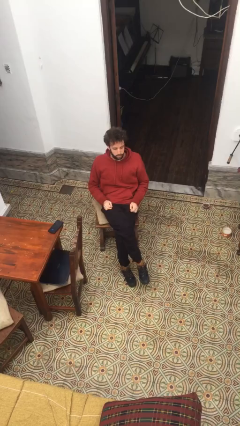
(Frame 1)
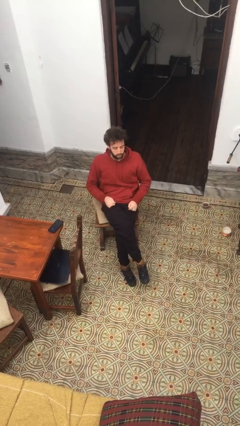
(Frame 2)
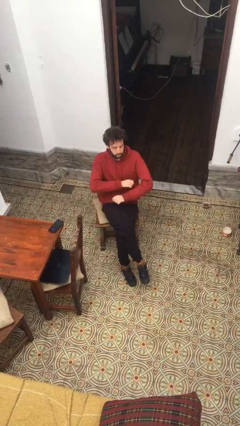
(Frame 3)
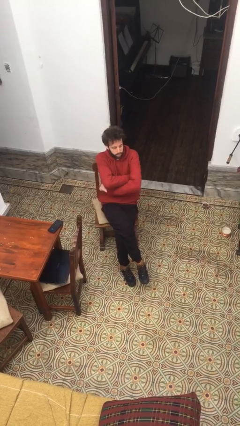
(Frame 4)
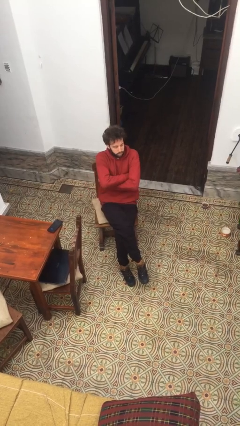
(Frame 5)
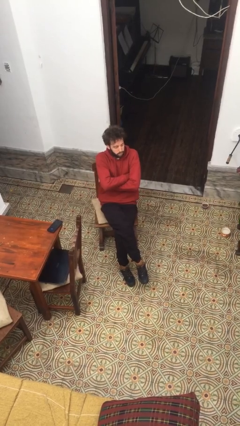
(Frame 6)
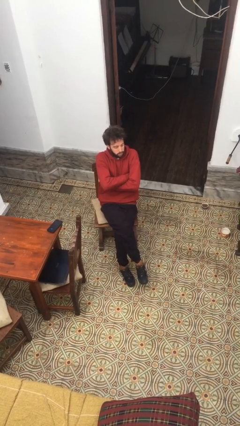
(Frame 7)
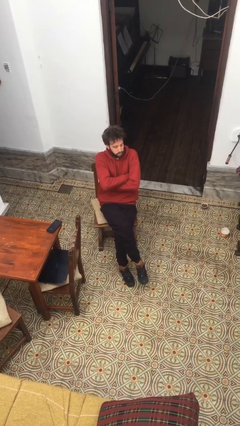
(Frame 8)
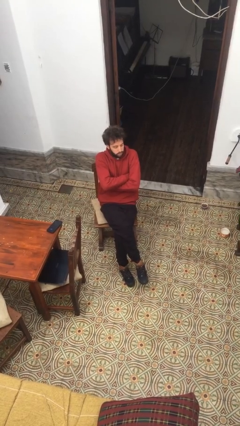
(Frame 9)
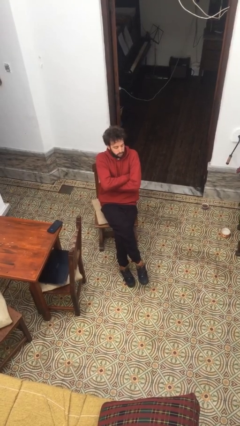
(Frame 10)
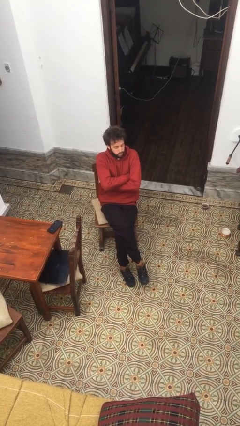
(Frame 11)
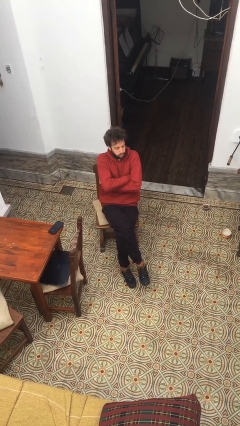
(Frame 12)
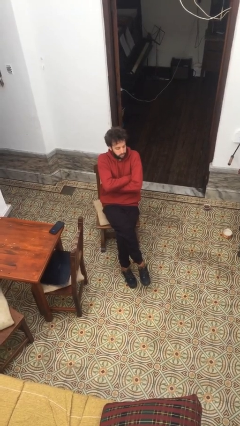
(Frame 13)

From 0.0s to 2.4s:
person crosses arms

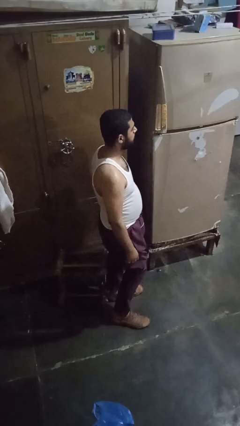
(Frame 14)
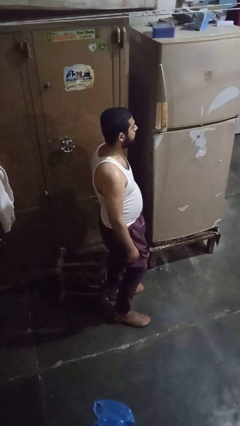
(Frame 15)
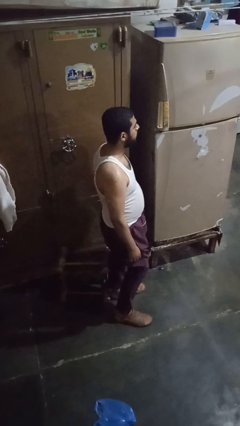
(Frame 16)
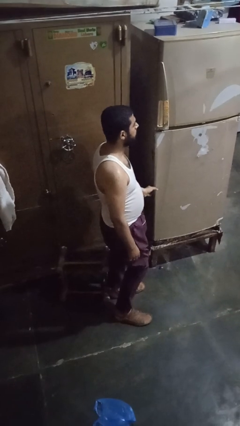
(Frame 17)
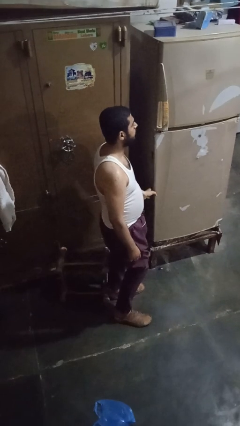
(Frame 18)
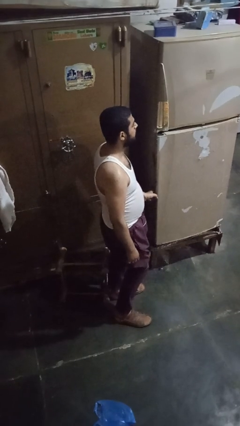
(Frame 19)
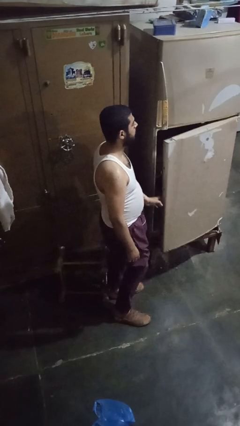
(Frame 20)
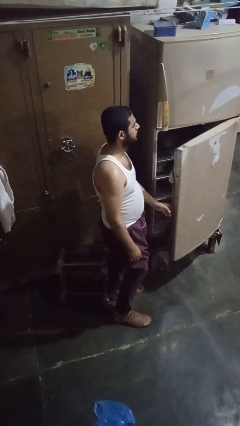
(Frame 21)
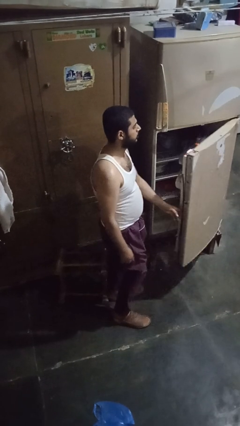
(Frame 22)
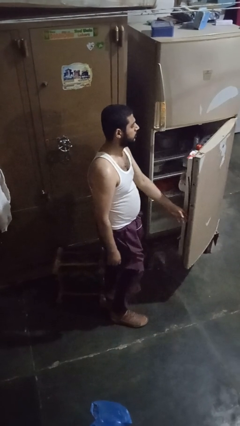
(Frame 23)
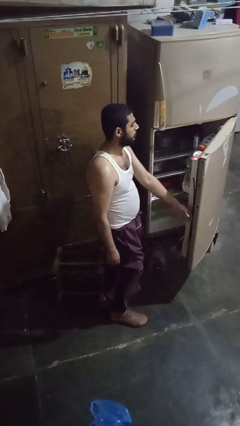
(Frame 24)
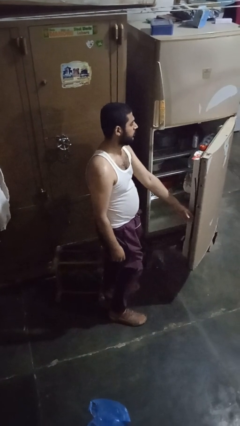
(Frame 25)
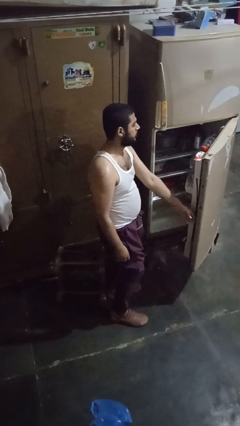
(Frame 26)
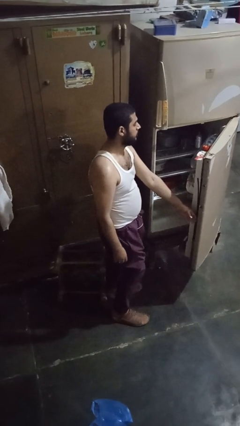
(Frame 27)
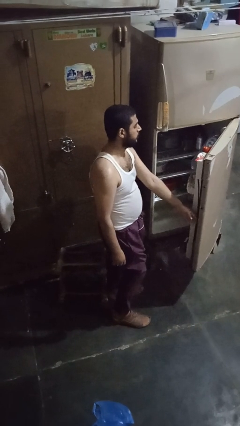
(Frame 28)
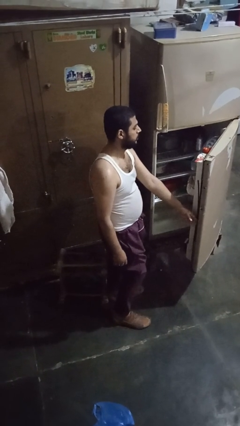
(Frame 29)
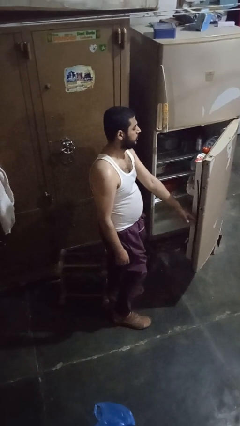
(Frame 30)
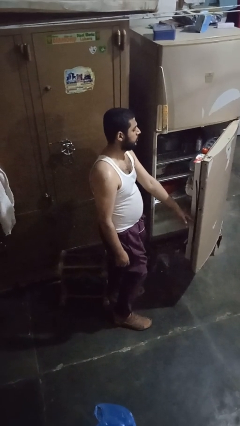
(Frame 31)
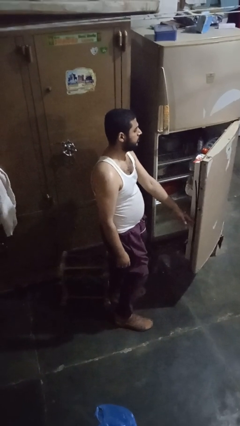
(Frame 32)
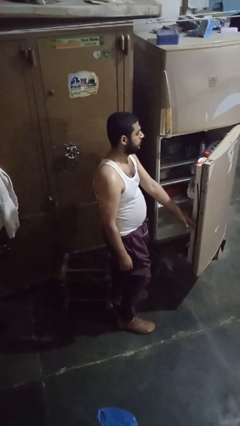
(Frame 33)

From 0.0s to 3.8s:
person opens refrigerator

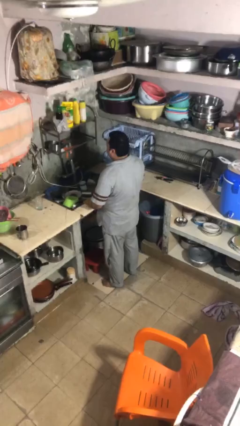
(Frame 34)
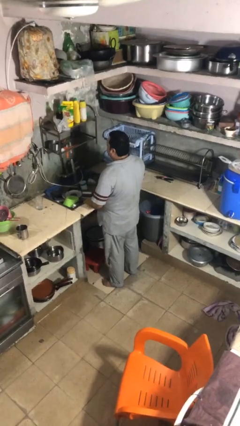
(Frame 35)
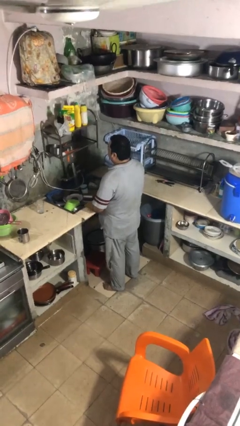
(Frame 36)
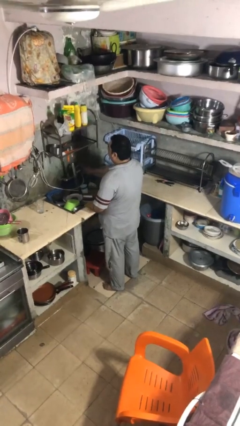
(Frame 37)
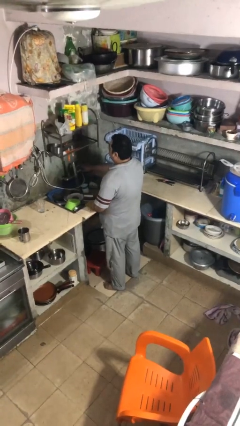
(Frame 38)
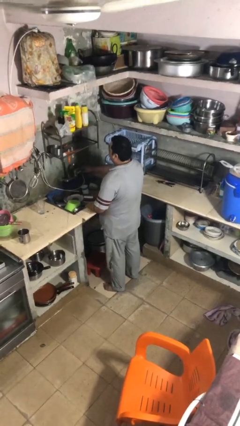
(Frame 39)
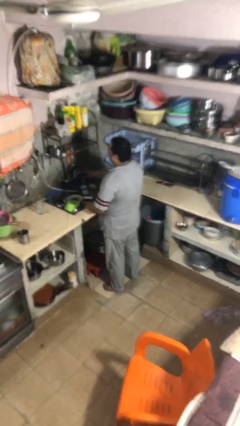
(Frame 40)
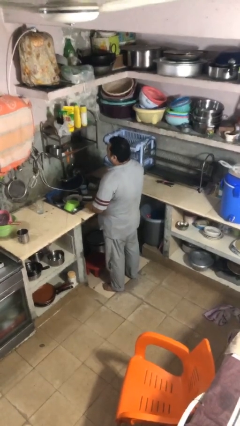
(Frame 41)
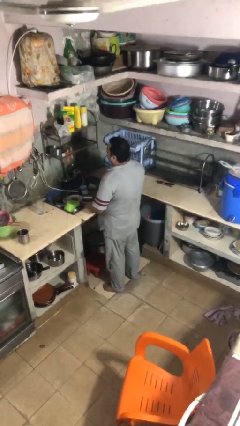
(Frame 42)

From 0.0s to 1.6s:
person turns off faucet

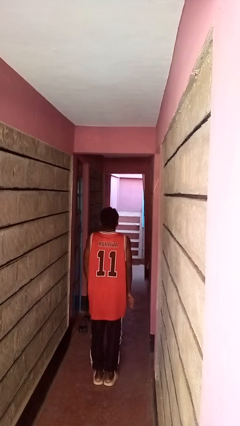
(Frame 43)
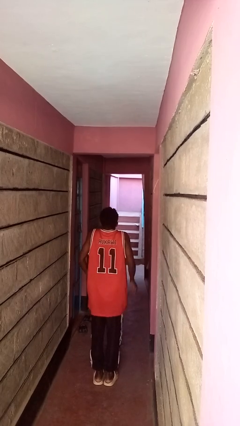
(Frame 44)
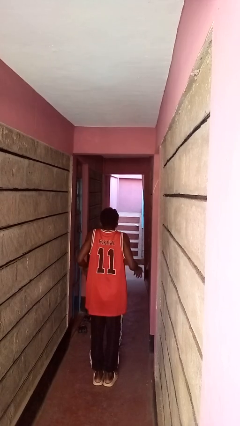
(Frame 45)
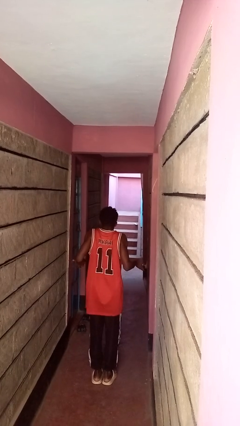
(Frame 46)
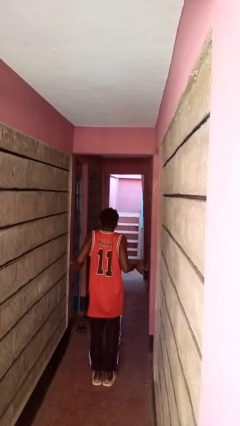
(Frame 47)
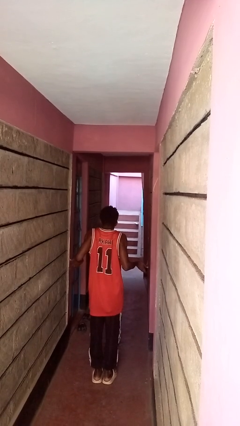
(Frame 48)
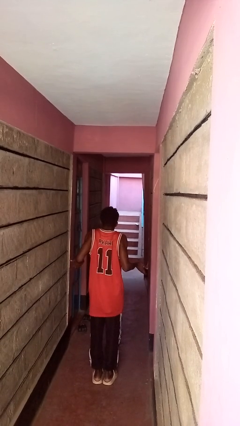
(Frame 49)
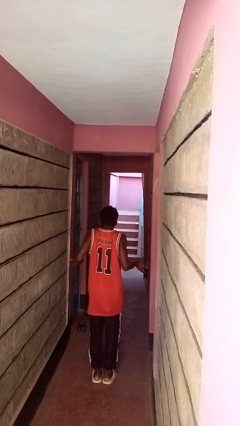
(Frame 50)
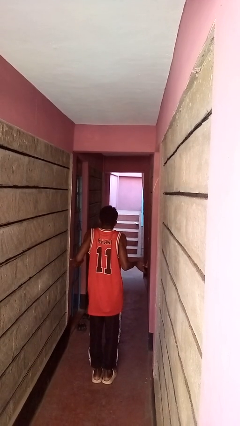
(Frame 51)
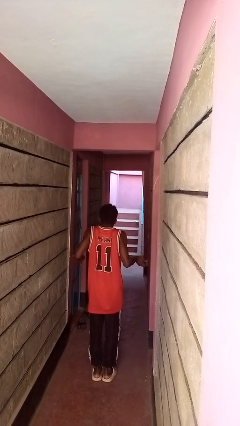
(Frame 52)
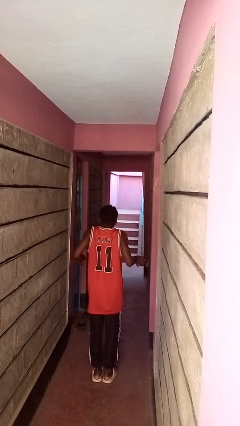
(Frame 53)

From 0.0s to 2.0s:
person shrugs

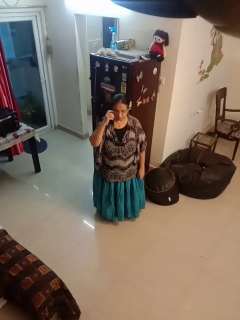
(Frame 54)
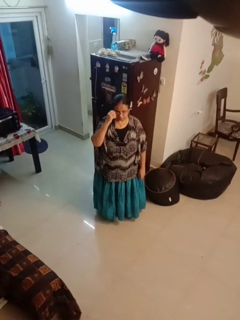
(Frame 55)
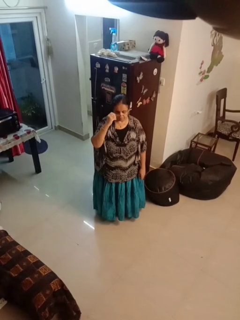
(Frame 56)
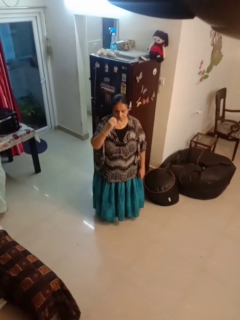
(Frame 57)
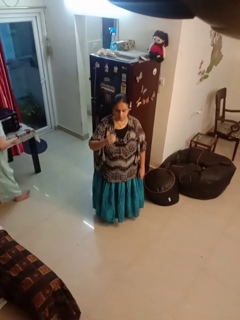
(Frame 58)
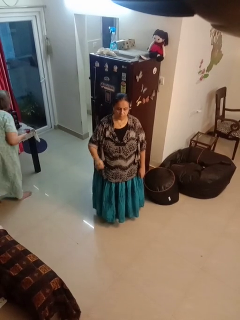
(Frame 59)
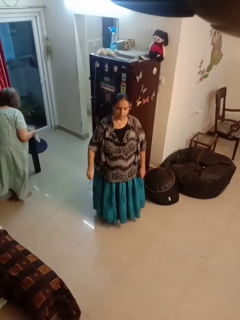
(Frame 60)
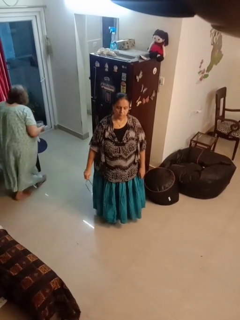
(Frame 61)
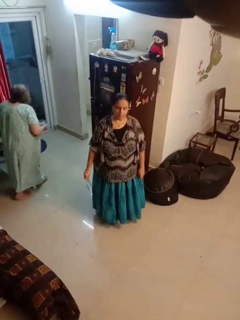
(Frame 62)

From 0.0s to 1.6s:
person takes off glasses

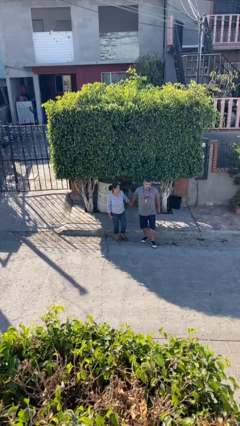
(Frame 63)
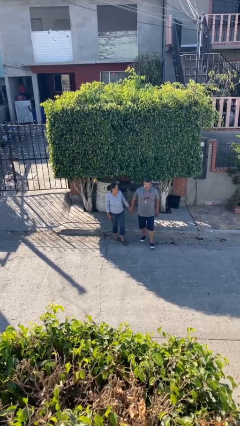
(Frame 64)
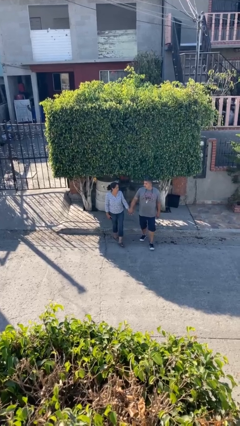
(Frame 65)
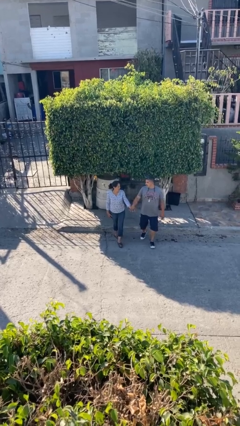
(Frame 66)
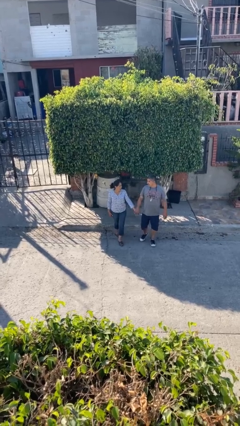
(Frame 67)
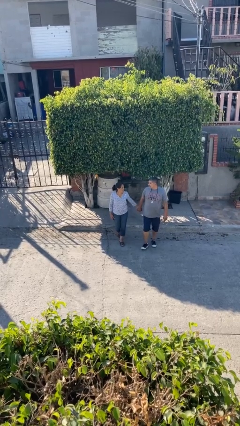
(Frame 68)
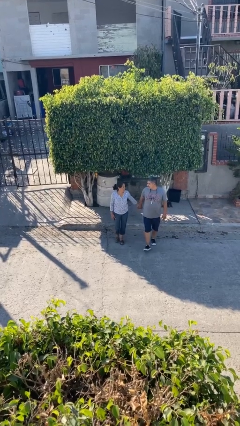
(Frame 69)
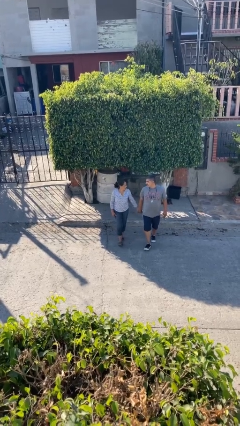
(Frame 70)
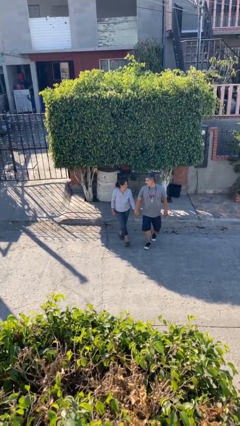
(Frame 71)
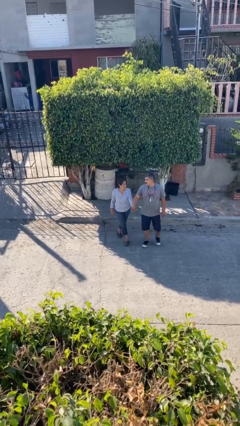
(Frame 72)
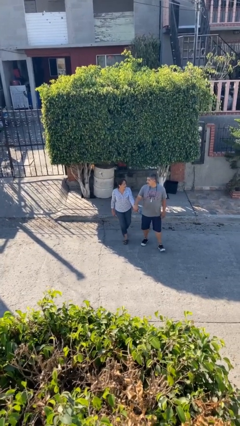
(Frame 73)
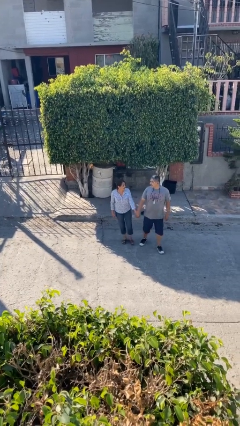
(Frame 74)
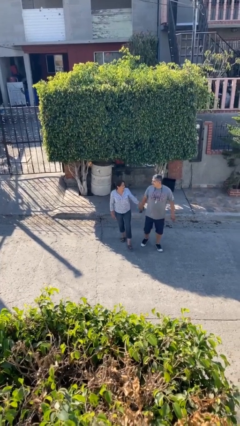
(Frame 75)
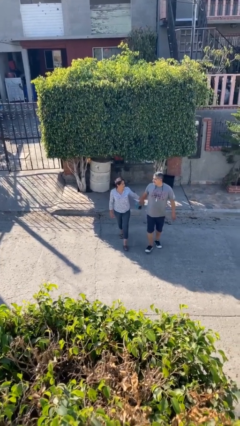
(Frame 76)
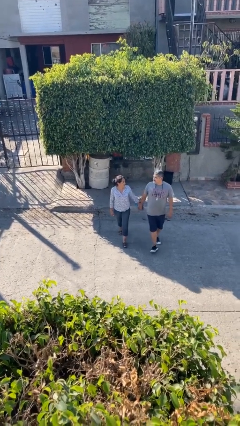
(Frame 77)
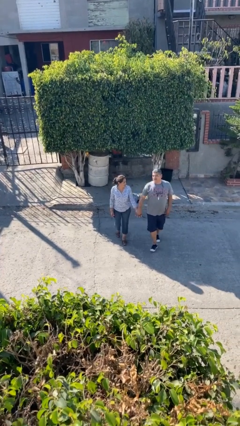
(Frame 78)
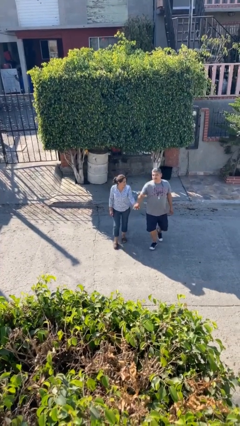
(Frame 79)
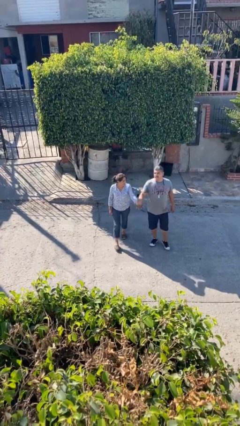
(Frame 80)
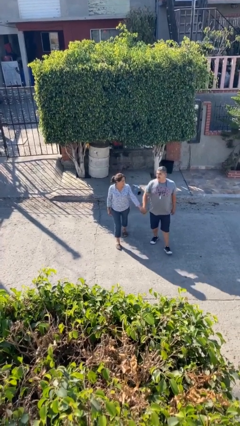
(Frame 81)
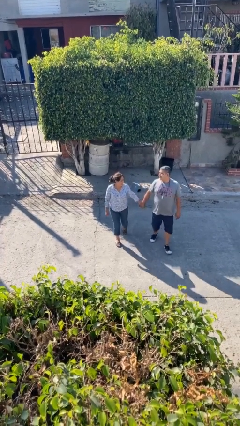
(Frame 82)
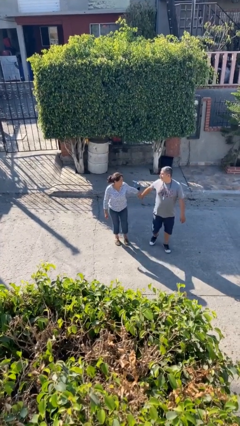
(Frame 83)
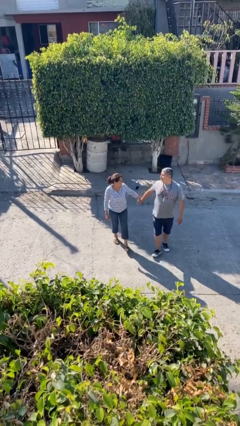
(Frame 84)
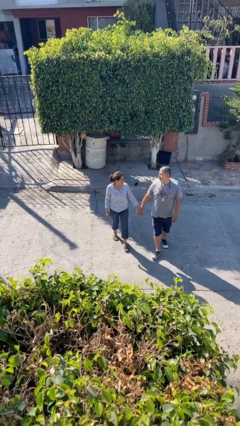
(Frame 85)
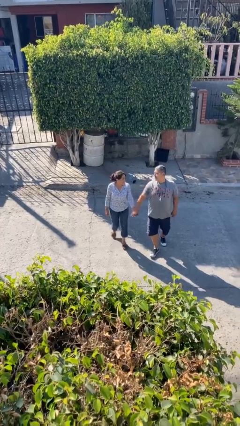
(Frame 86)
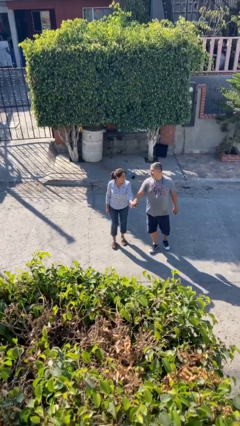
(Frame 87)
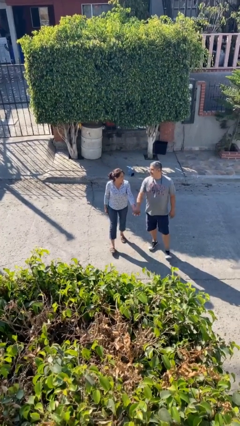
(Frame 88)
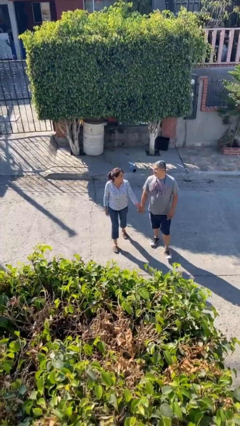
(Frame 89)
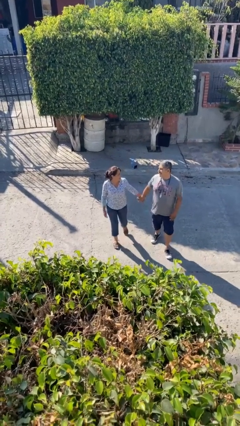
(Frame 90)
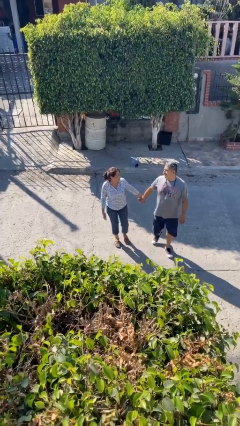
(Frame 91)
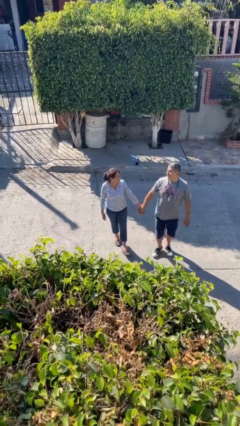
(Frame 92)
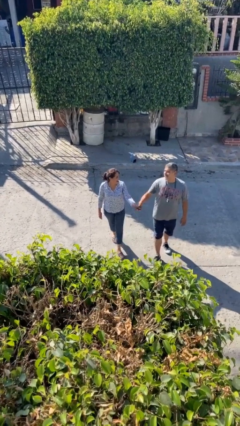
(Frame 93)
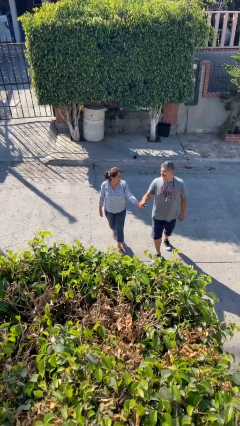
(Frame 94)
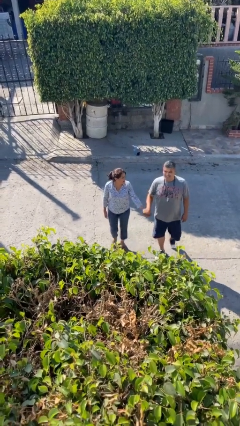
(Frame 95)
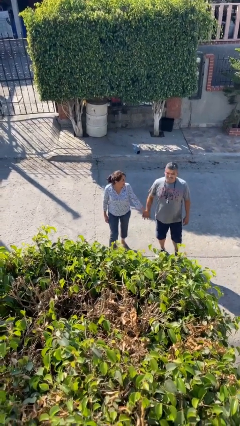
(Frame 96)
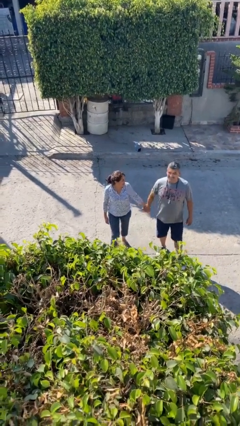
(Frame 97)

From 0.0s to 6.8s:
person holds hand
